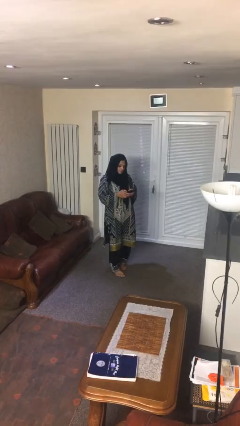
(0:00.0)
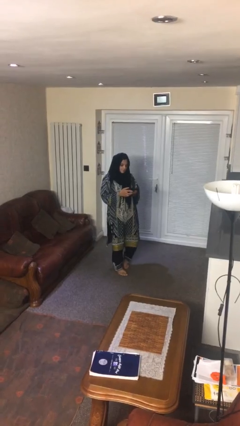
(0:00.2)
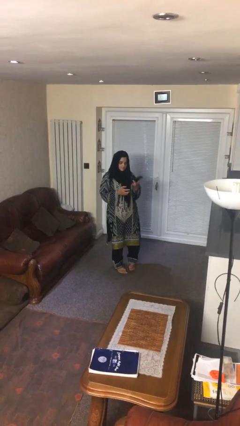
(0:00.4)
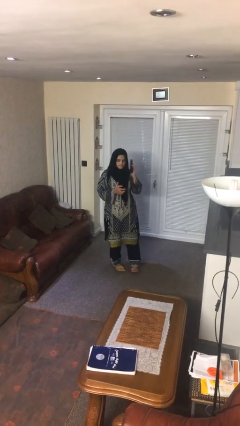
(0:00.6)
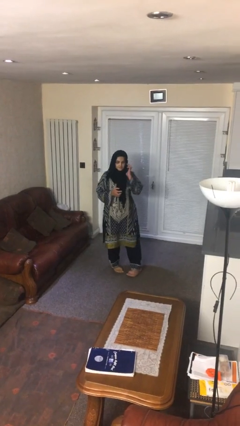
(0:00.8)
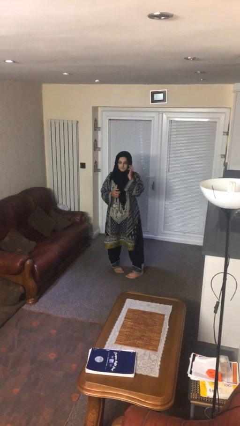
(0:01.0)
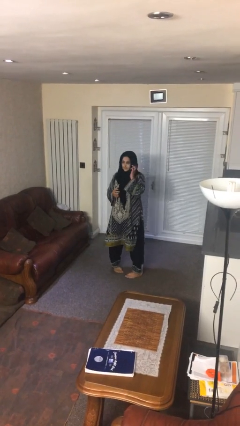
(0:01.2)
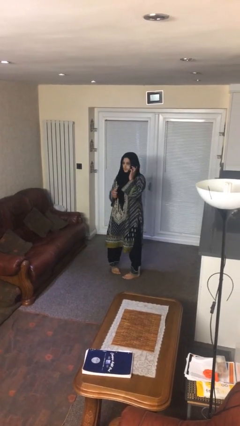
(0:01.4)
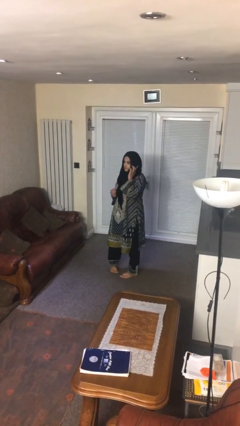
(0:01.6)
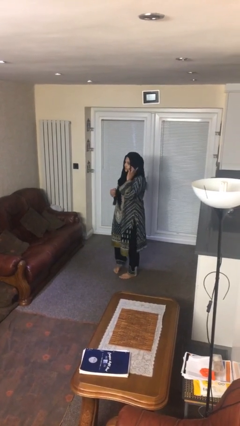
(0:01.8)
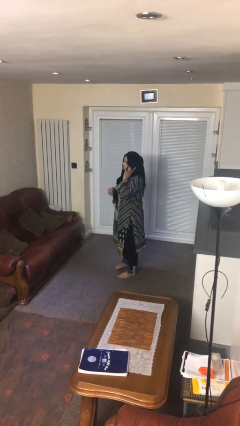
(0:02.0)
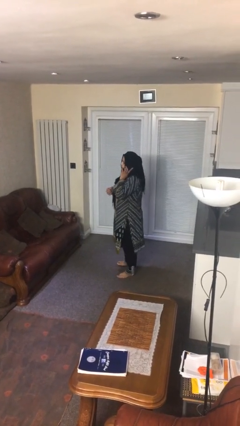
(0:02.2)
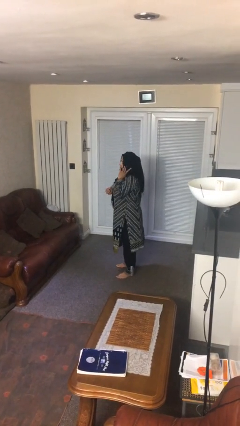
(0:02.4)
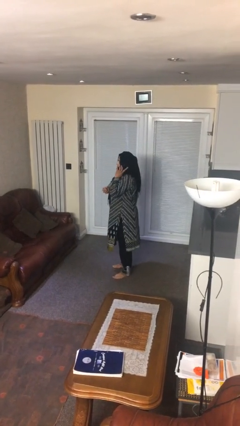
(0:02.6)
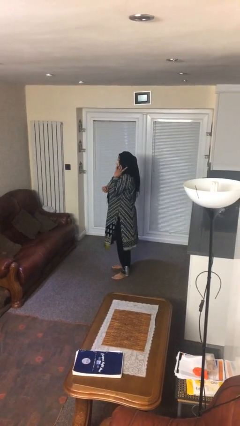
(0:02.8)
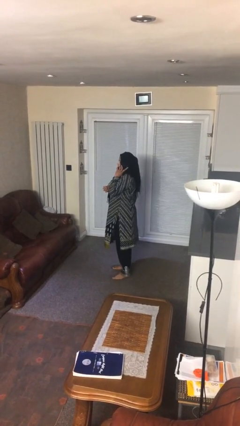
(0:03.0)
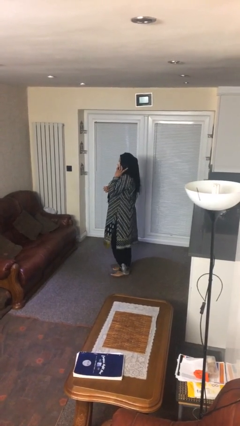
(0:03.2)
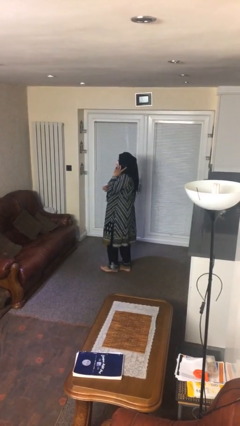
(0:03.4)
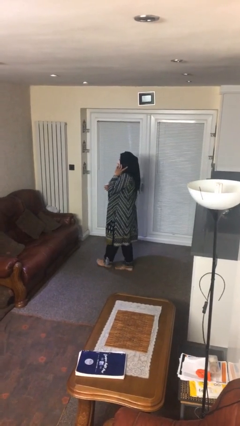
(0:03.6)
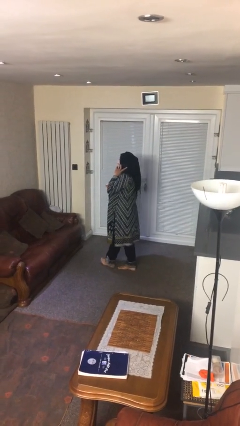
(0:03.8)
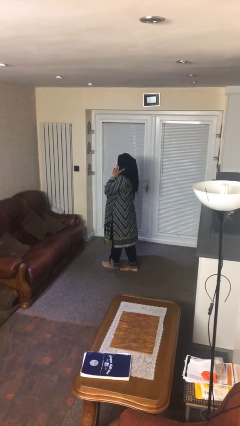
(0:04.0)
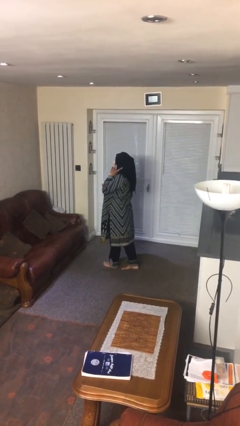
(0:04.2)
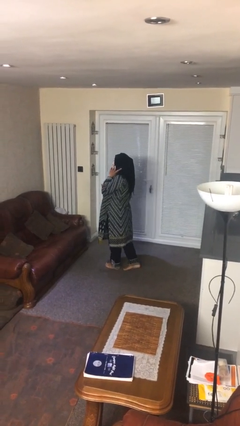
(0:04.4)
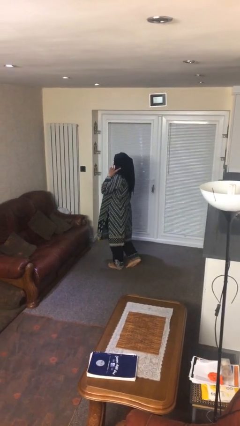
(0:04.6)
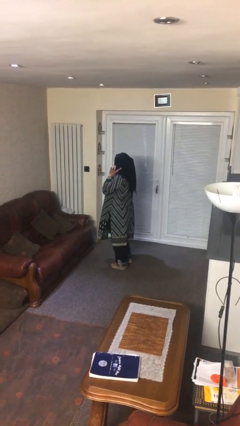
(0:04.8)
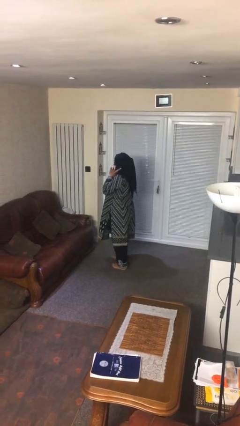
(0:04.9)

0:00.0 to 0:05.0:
person talks on phone

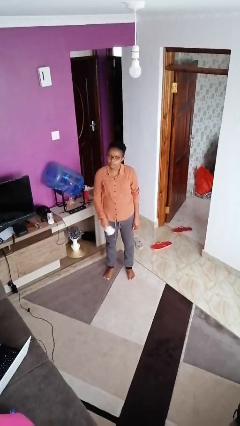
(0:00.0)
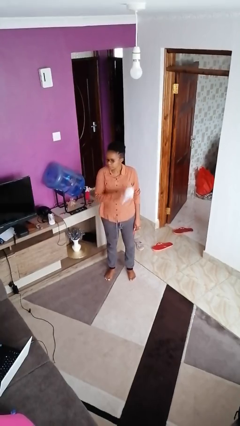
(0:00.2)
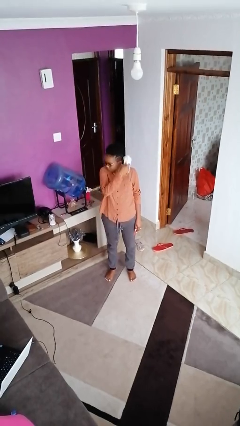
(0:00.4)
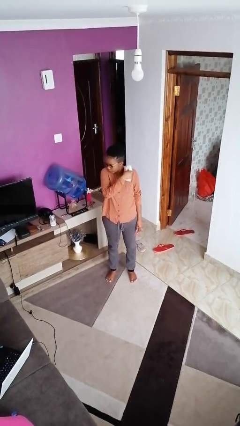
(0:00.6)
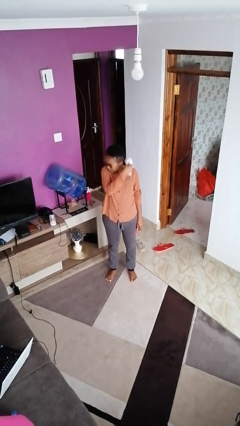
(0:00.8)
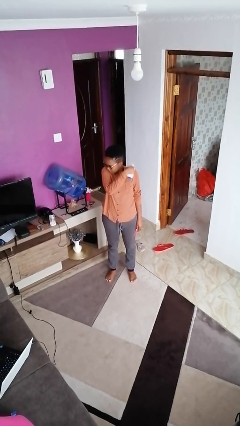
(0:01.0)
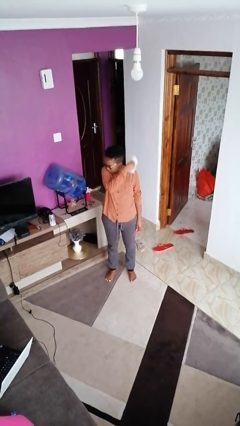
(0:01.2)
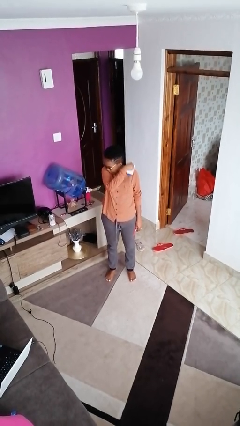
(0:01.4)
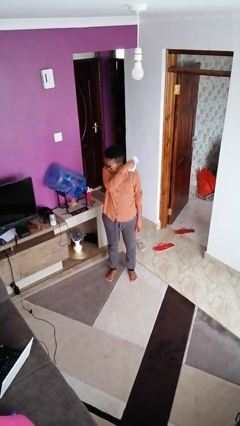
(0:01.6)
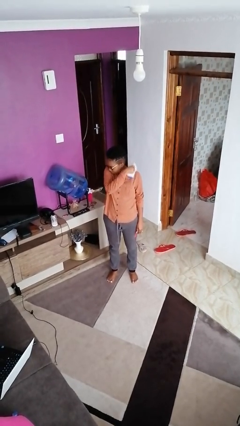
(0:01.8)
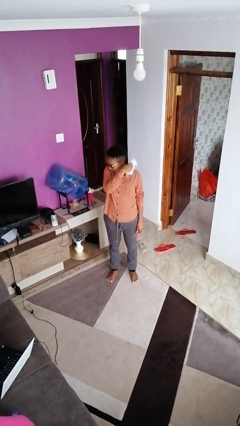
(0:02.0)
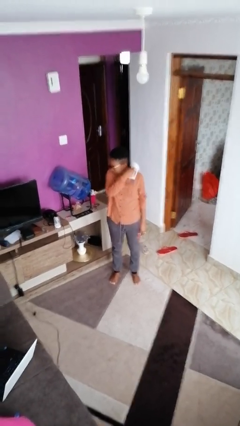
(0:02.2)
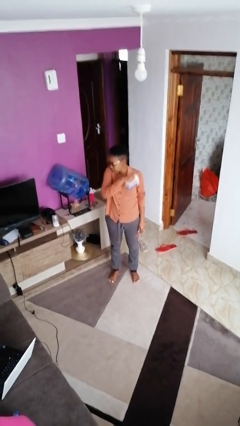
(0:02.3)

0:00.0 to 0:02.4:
person brushes hair

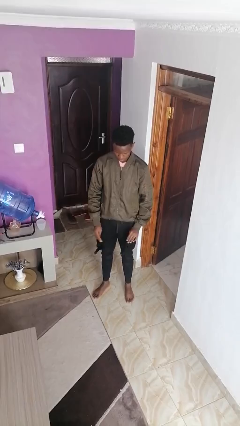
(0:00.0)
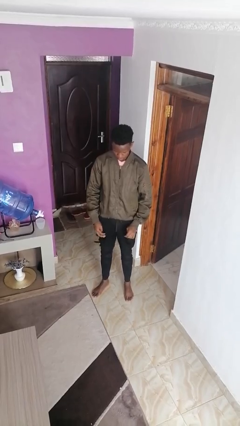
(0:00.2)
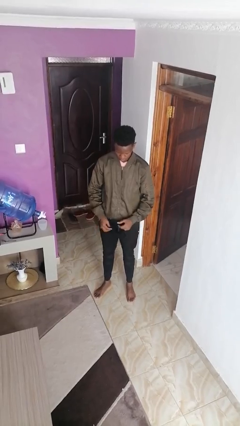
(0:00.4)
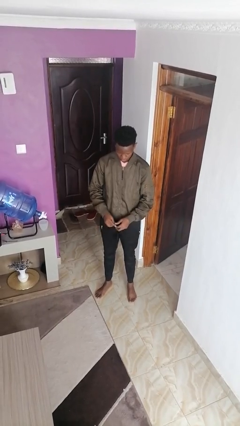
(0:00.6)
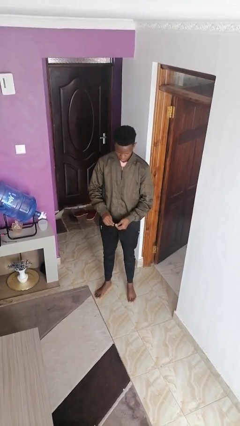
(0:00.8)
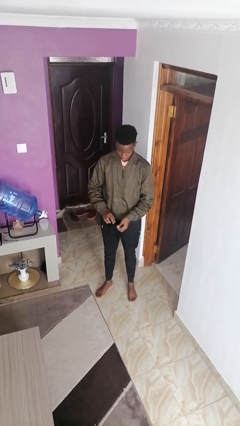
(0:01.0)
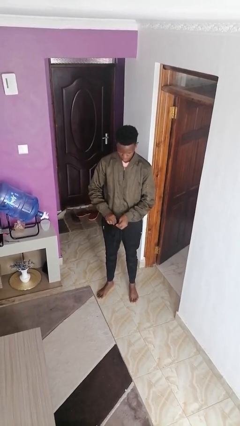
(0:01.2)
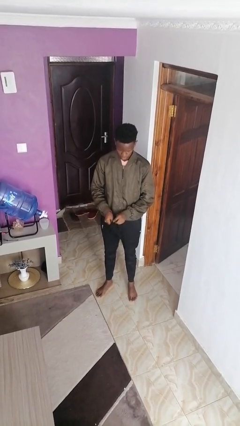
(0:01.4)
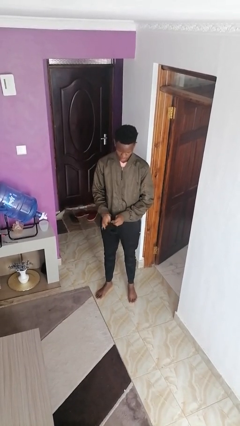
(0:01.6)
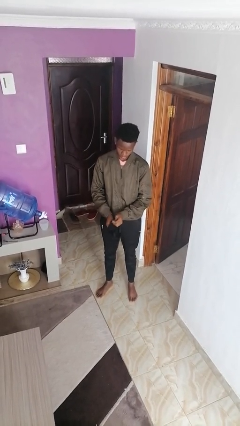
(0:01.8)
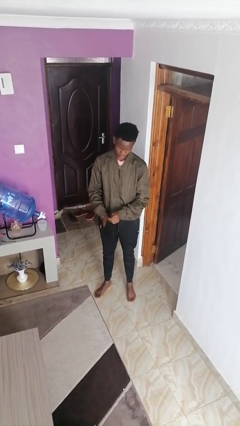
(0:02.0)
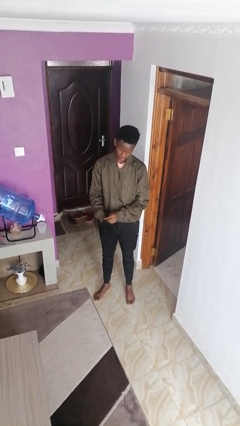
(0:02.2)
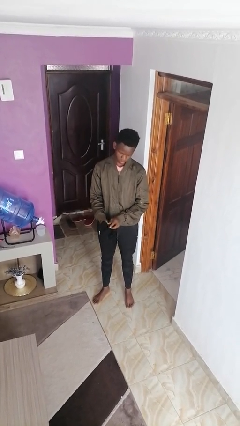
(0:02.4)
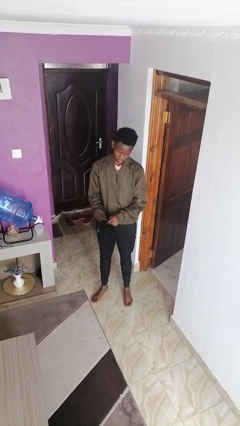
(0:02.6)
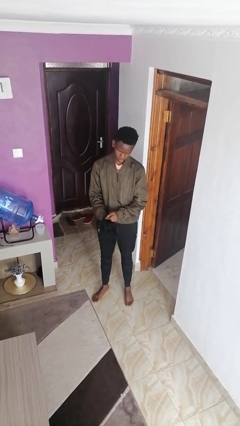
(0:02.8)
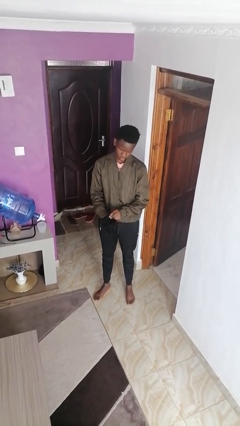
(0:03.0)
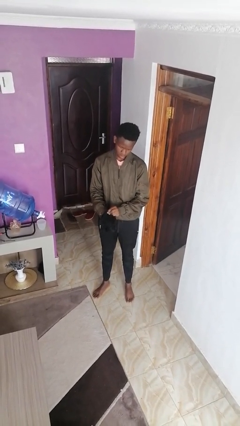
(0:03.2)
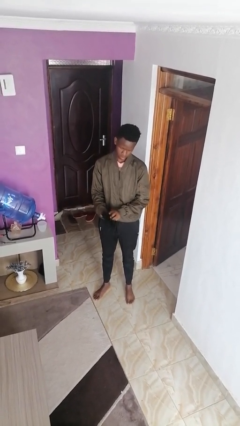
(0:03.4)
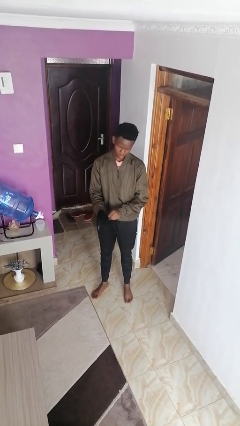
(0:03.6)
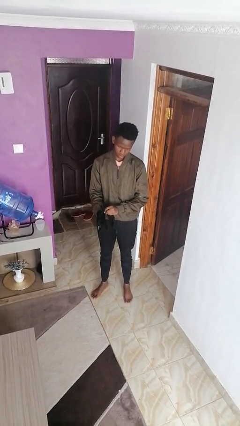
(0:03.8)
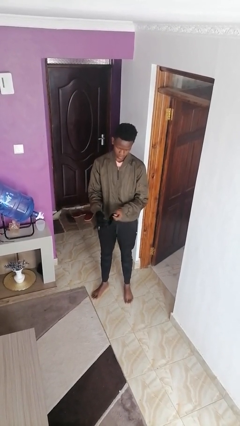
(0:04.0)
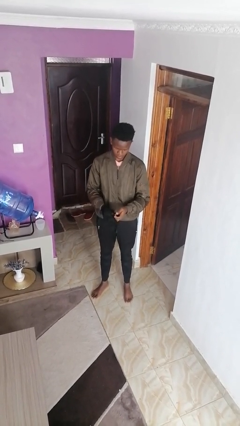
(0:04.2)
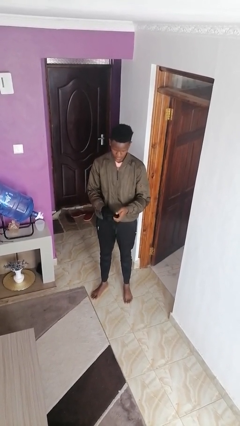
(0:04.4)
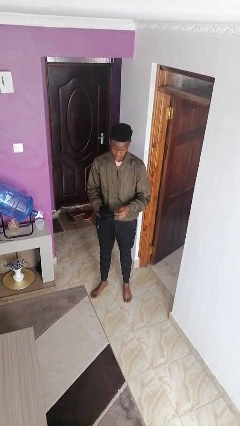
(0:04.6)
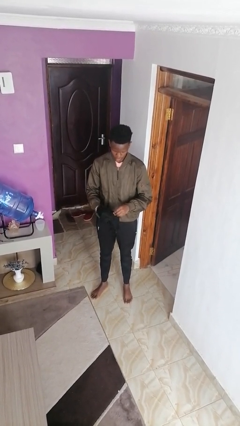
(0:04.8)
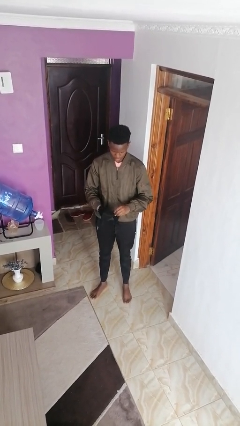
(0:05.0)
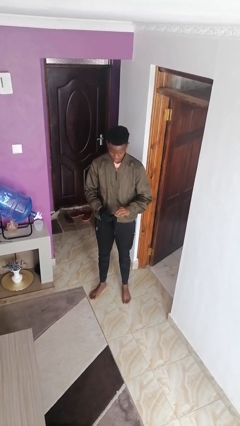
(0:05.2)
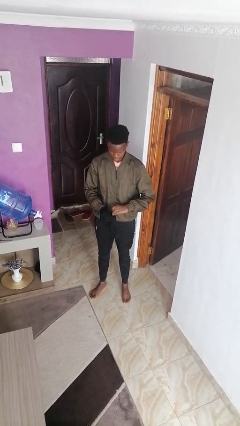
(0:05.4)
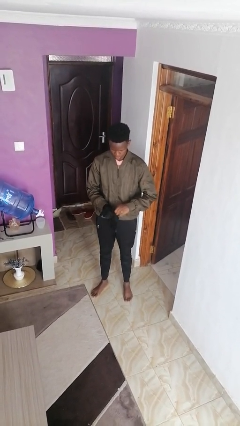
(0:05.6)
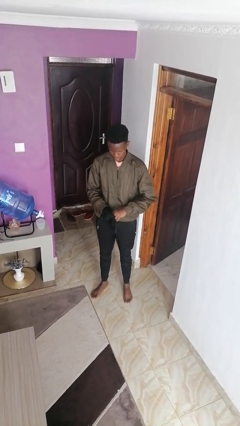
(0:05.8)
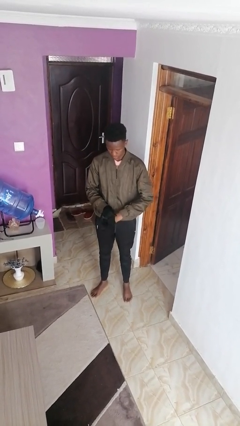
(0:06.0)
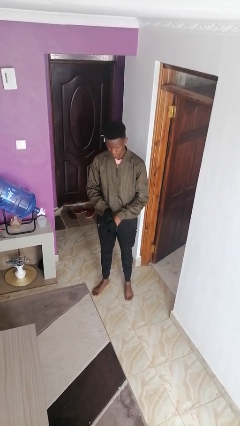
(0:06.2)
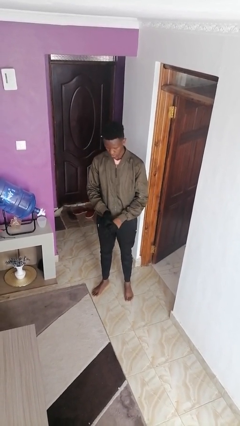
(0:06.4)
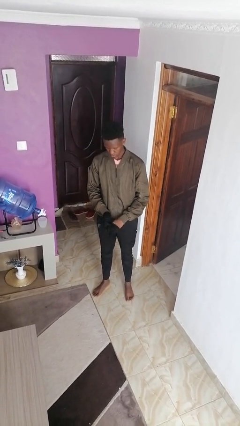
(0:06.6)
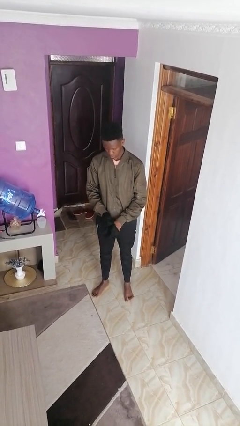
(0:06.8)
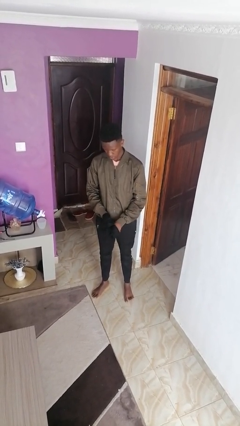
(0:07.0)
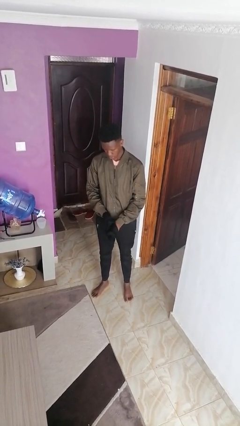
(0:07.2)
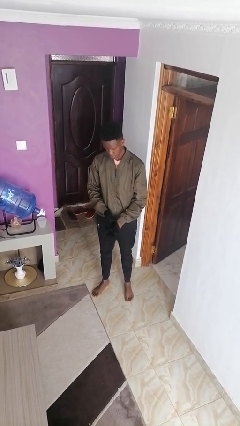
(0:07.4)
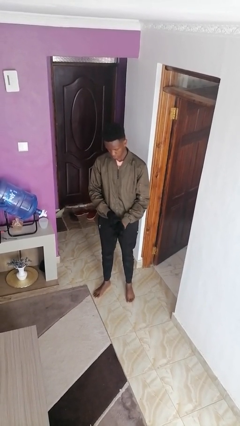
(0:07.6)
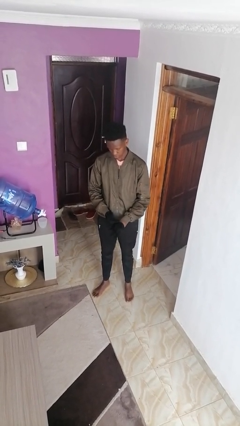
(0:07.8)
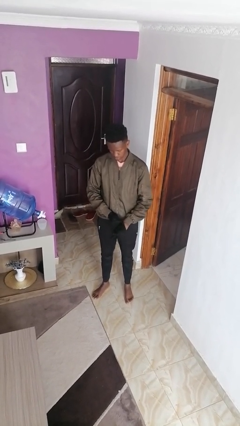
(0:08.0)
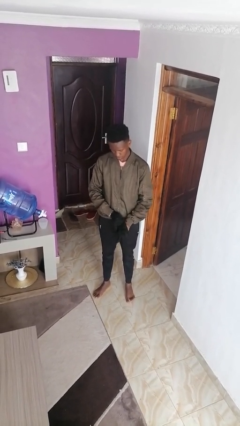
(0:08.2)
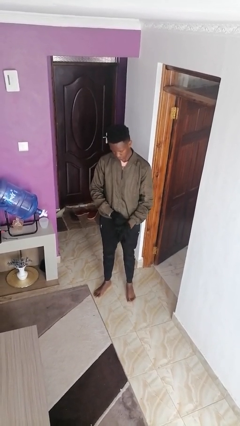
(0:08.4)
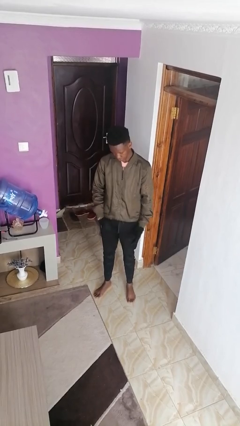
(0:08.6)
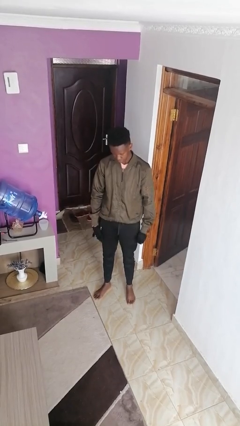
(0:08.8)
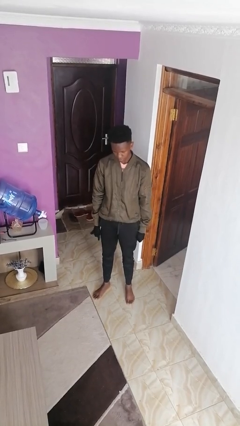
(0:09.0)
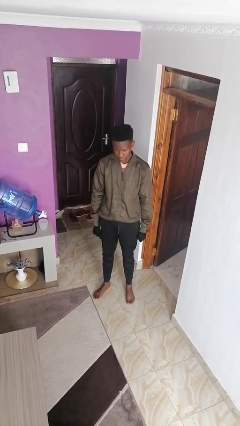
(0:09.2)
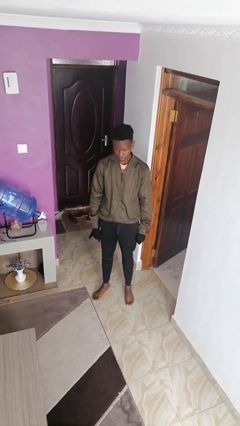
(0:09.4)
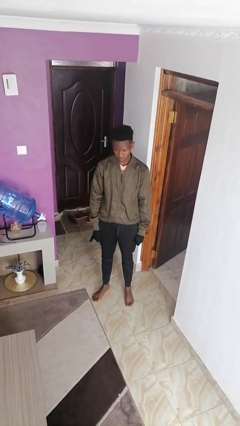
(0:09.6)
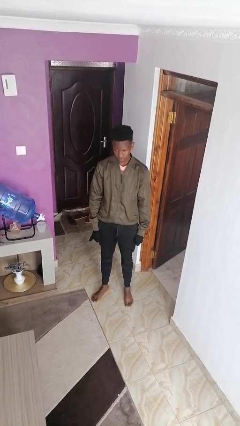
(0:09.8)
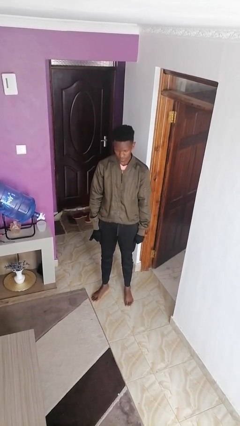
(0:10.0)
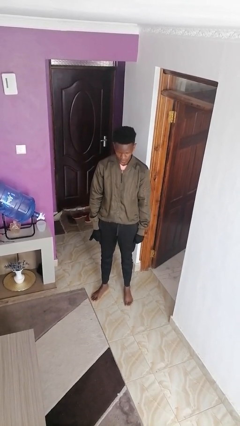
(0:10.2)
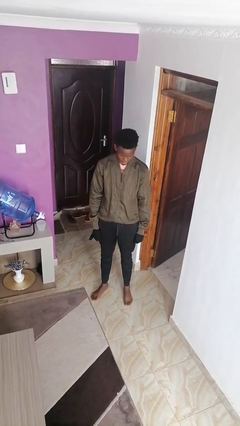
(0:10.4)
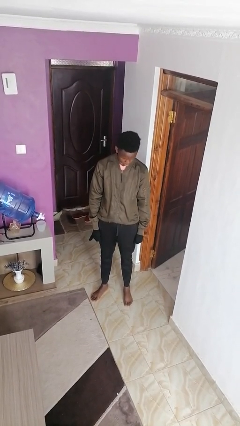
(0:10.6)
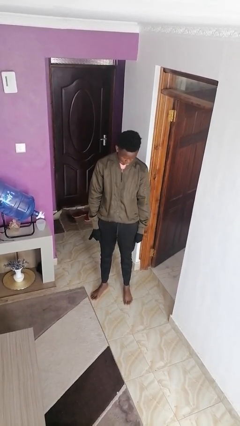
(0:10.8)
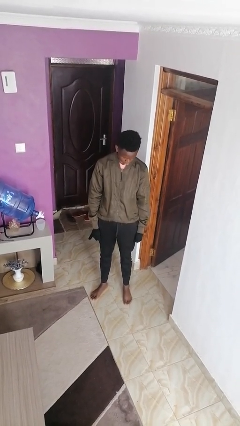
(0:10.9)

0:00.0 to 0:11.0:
person puts on gloves
